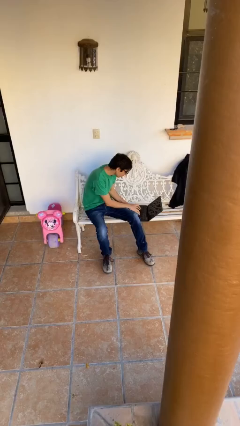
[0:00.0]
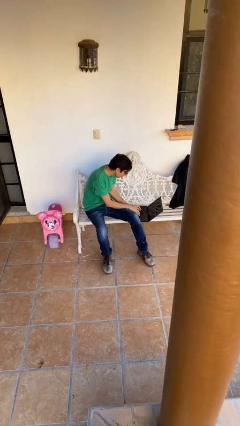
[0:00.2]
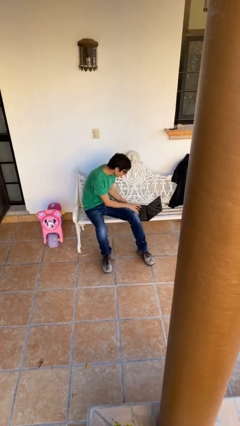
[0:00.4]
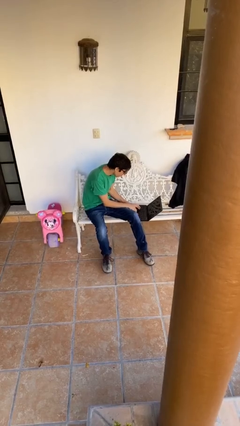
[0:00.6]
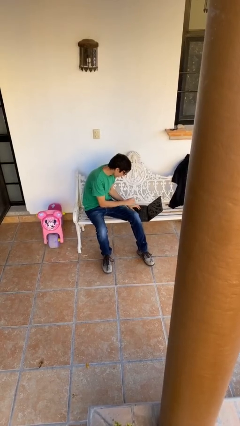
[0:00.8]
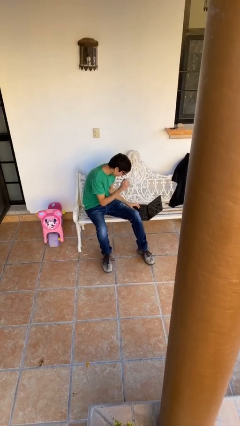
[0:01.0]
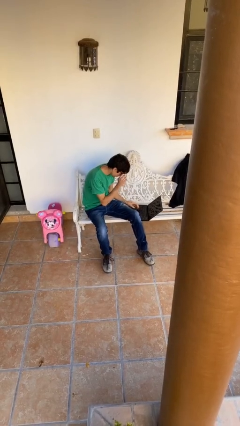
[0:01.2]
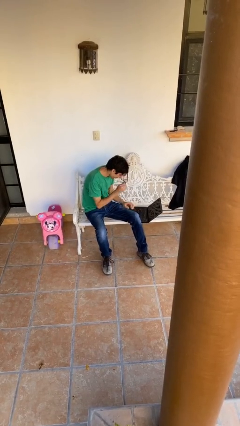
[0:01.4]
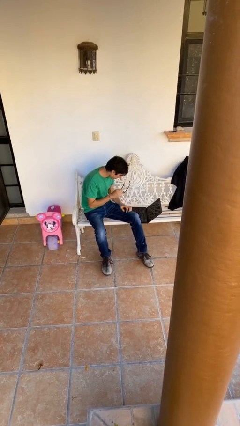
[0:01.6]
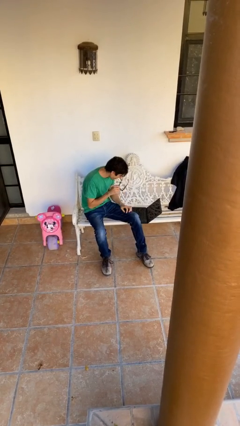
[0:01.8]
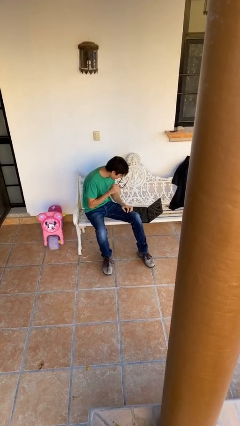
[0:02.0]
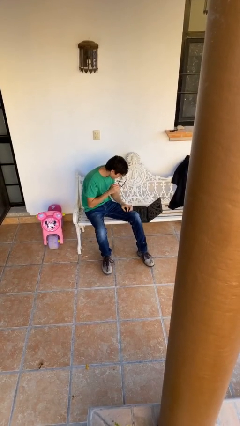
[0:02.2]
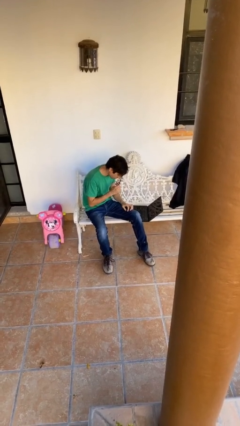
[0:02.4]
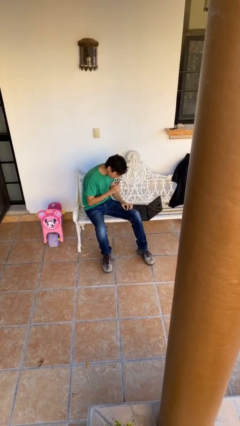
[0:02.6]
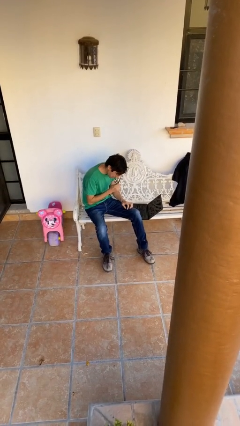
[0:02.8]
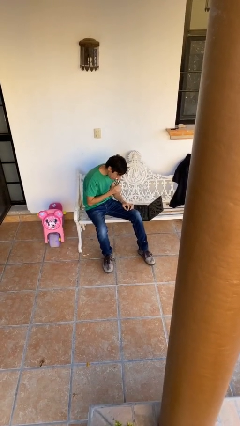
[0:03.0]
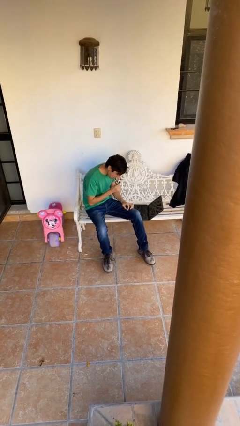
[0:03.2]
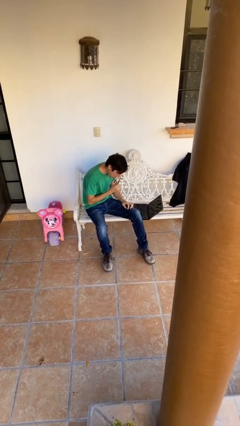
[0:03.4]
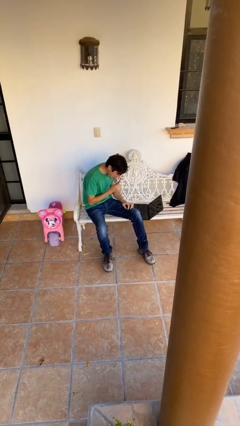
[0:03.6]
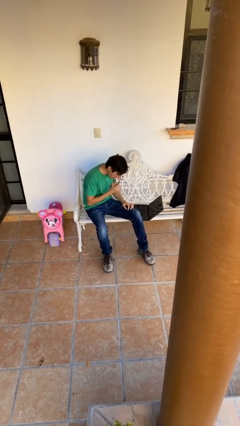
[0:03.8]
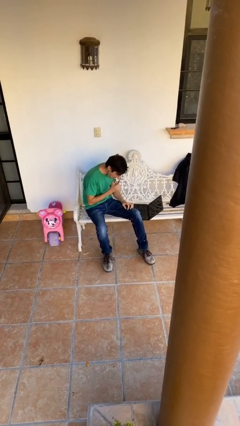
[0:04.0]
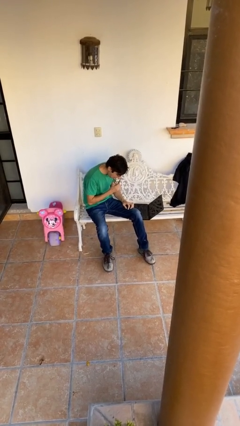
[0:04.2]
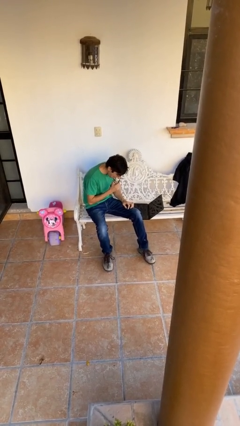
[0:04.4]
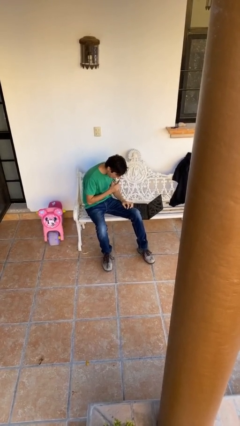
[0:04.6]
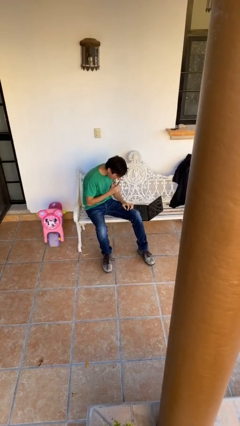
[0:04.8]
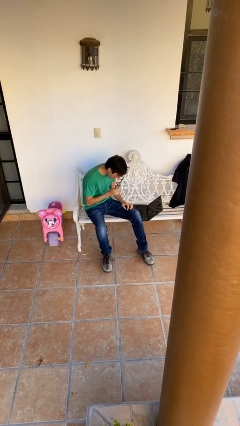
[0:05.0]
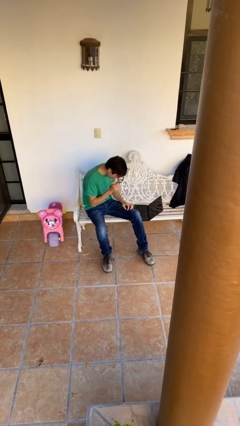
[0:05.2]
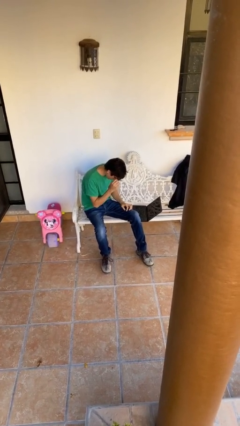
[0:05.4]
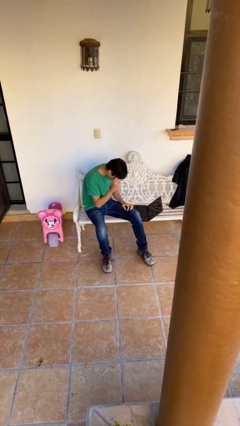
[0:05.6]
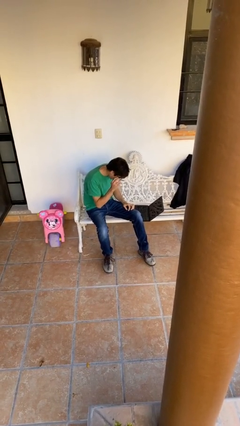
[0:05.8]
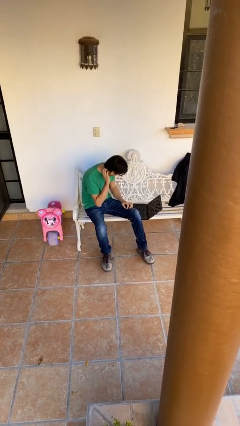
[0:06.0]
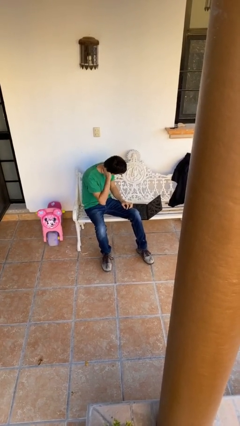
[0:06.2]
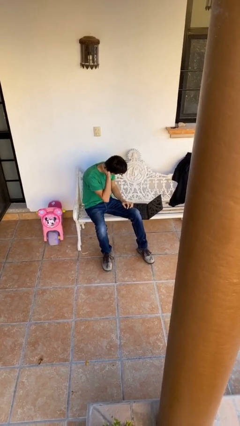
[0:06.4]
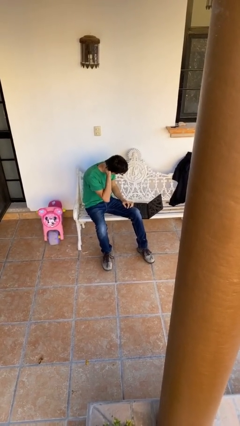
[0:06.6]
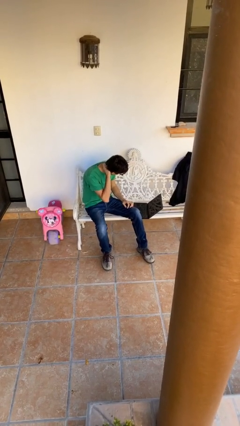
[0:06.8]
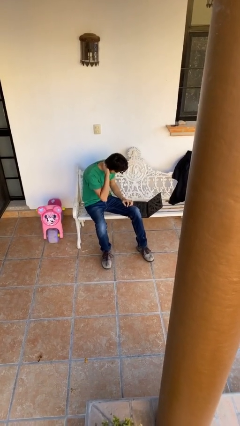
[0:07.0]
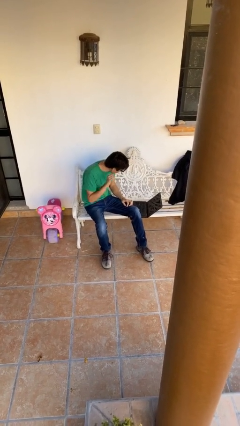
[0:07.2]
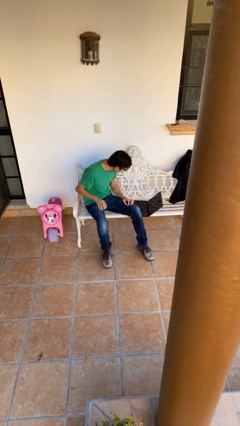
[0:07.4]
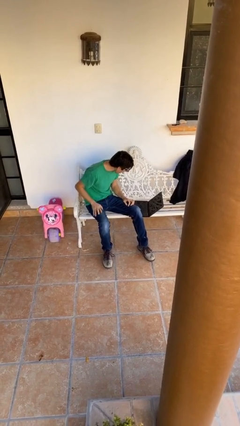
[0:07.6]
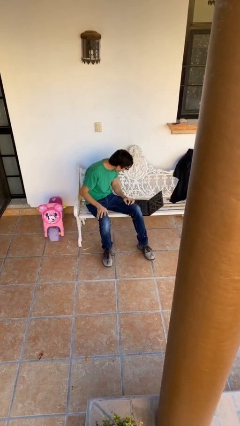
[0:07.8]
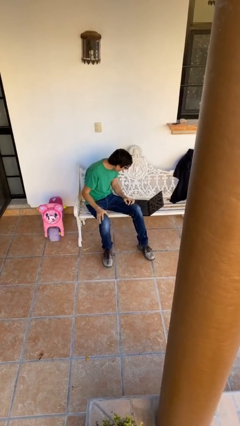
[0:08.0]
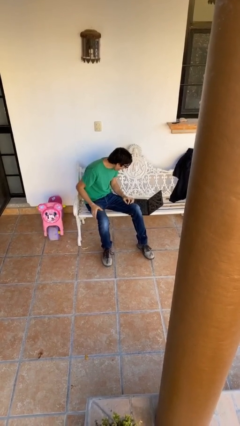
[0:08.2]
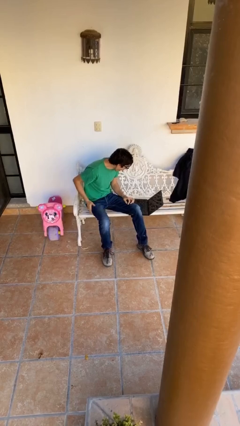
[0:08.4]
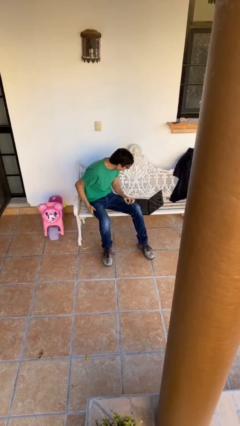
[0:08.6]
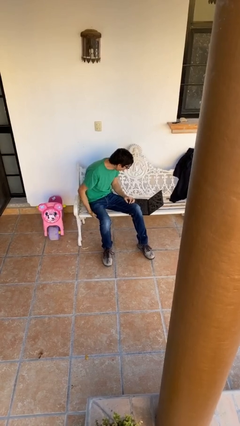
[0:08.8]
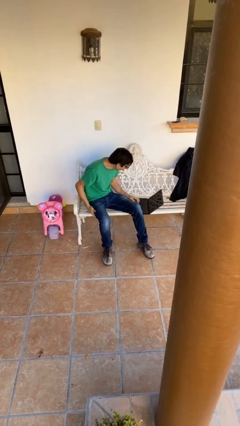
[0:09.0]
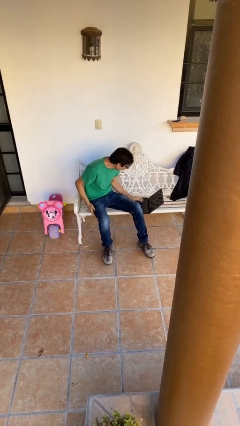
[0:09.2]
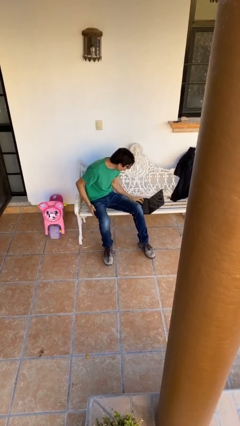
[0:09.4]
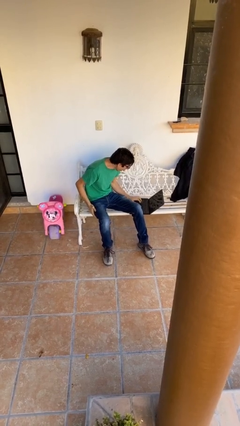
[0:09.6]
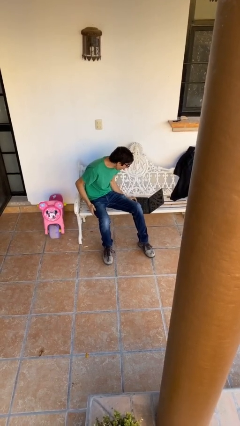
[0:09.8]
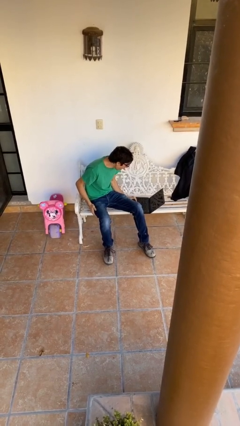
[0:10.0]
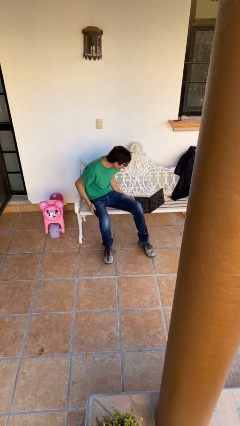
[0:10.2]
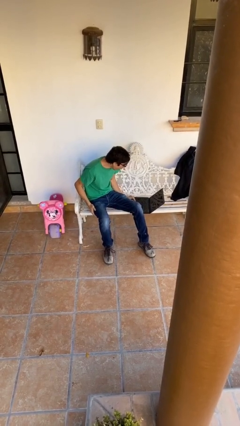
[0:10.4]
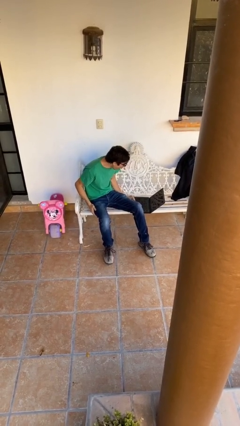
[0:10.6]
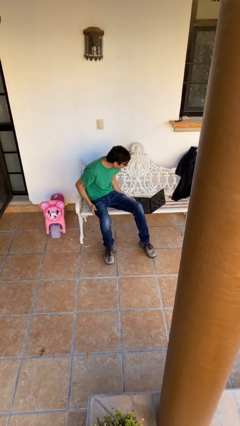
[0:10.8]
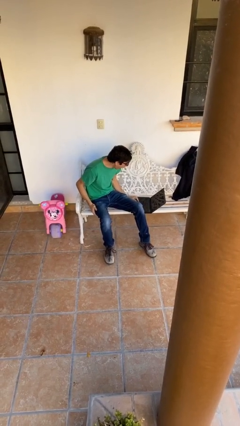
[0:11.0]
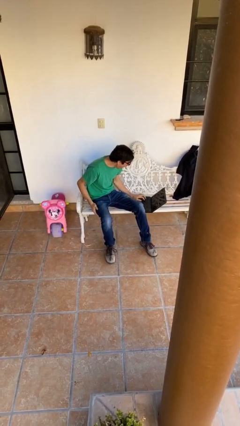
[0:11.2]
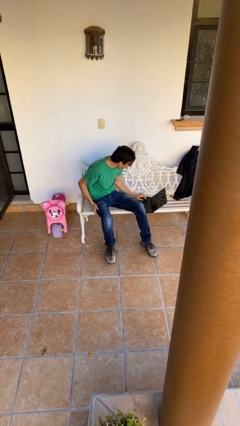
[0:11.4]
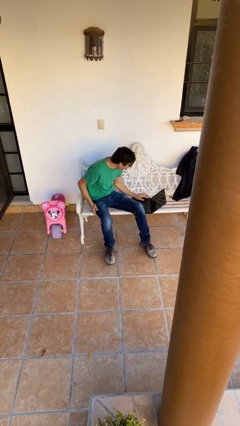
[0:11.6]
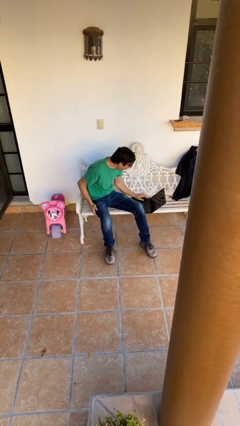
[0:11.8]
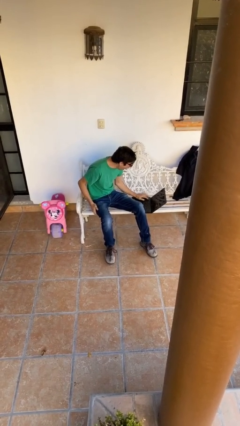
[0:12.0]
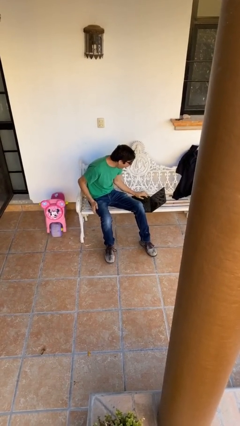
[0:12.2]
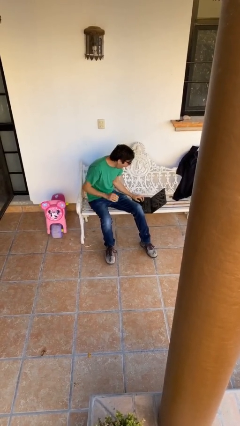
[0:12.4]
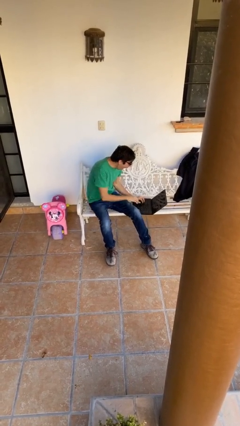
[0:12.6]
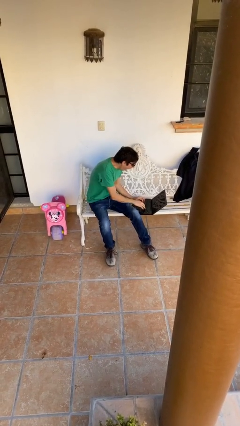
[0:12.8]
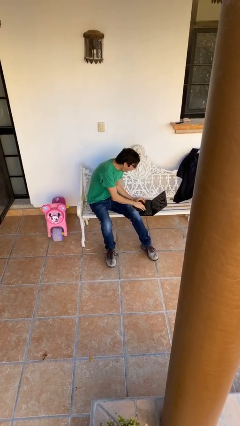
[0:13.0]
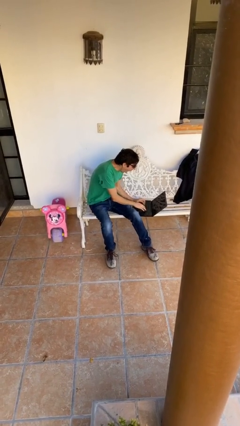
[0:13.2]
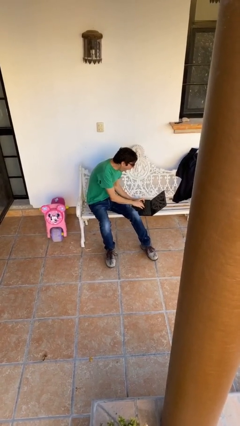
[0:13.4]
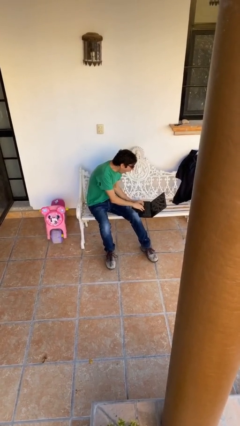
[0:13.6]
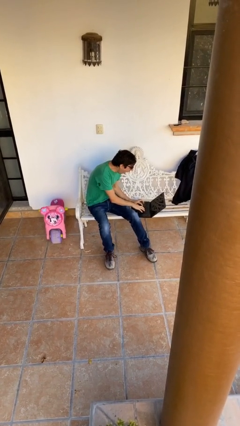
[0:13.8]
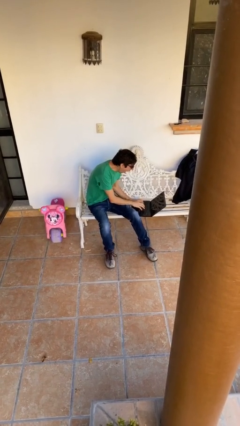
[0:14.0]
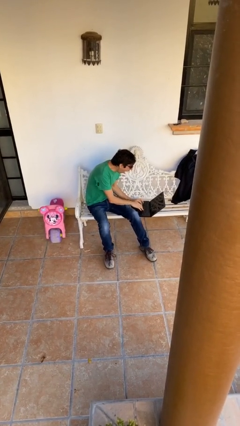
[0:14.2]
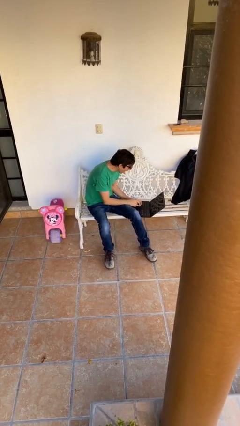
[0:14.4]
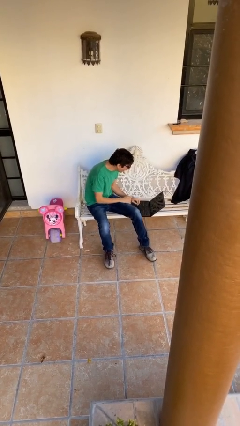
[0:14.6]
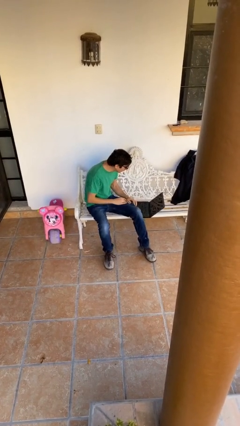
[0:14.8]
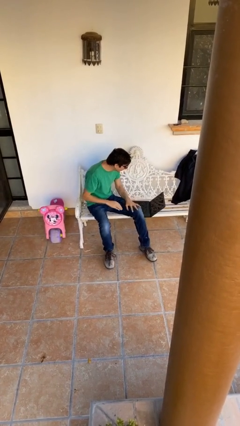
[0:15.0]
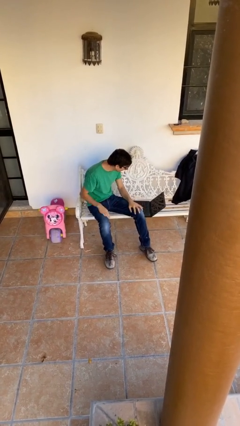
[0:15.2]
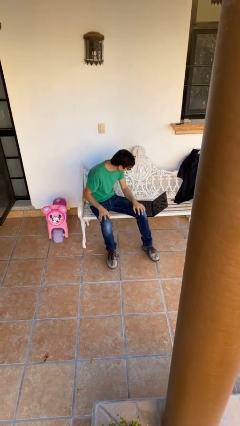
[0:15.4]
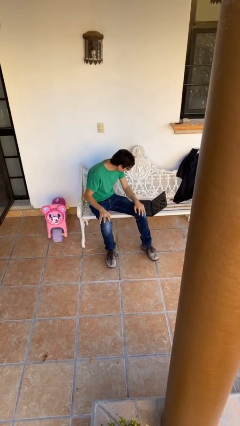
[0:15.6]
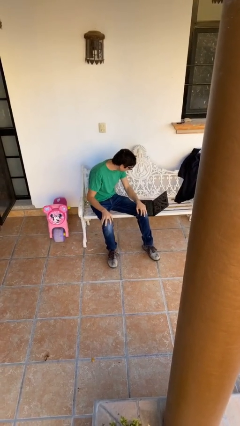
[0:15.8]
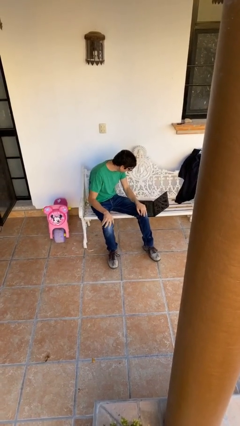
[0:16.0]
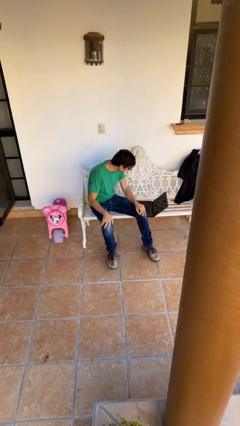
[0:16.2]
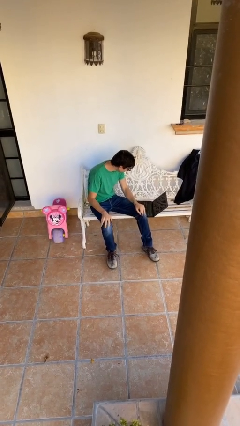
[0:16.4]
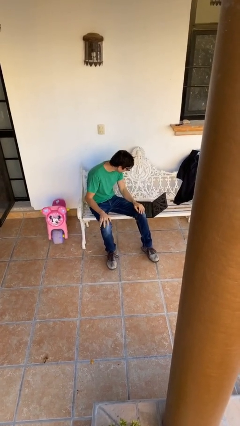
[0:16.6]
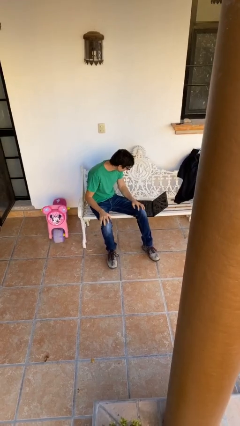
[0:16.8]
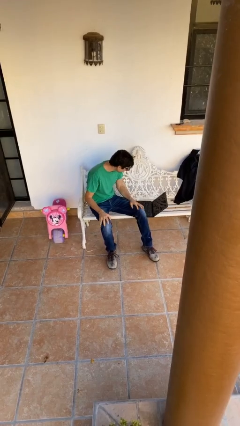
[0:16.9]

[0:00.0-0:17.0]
person interacts with laptop

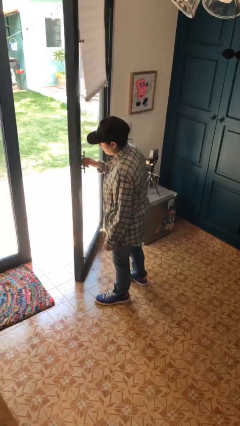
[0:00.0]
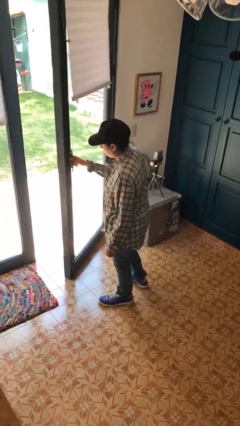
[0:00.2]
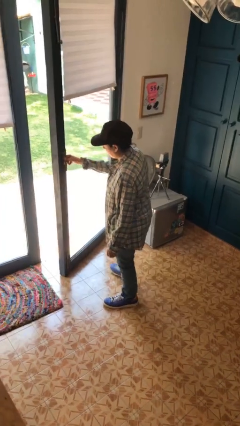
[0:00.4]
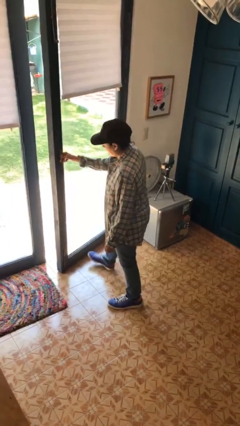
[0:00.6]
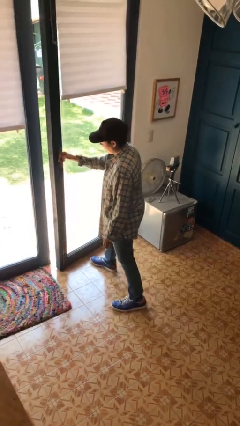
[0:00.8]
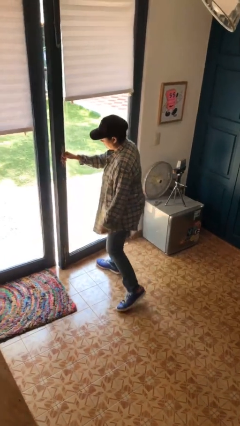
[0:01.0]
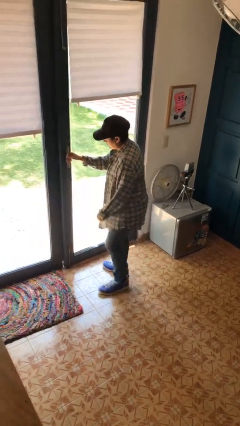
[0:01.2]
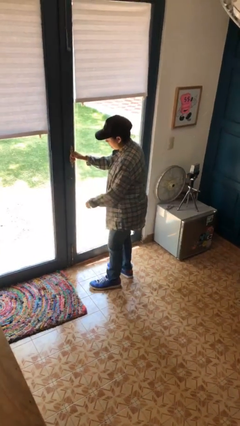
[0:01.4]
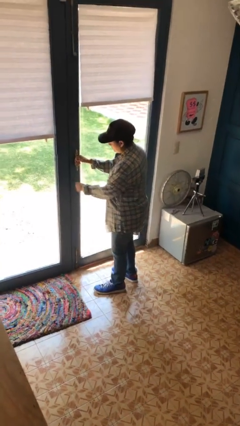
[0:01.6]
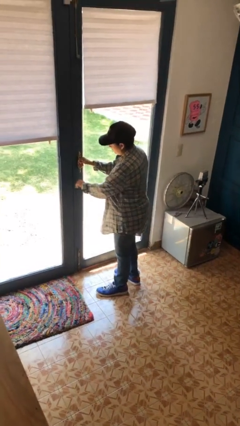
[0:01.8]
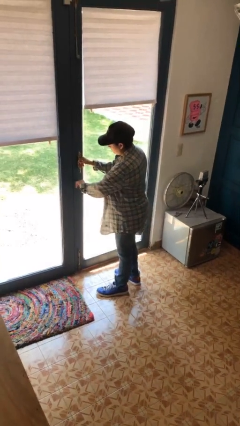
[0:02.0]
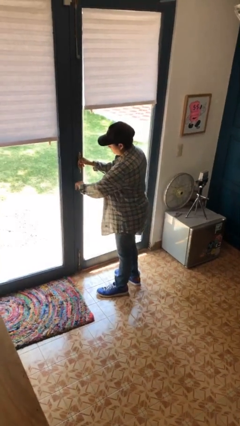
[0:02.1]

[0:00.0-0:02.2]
person closes facility door
